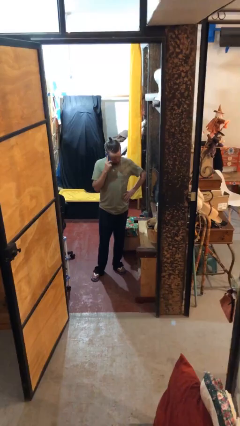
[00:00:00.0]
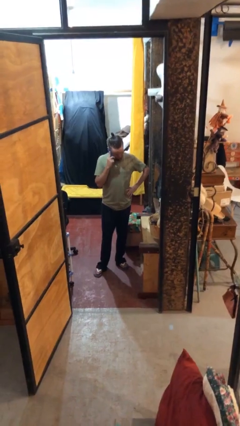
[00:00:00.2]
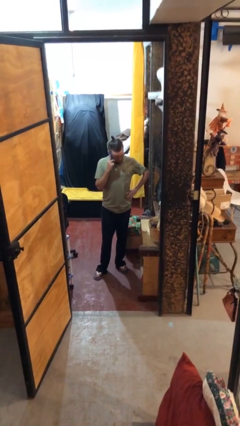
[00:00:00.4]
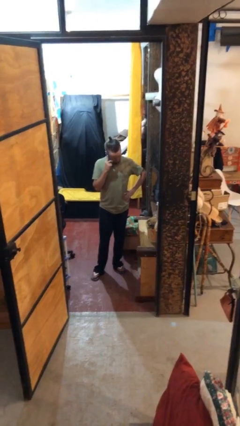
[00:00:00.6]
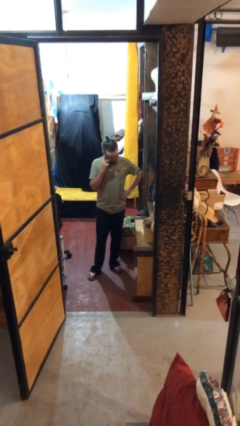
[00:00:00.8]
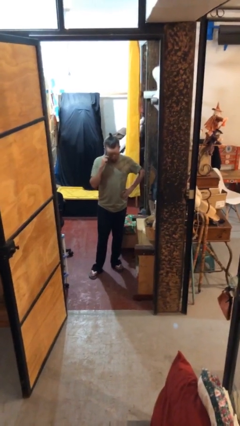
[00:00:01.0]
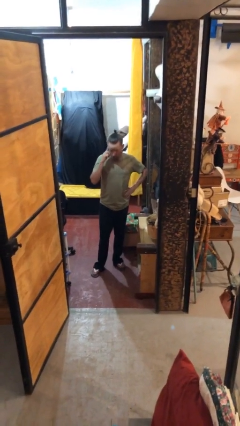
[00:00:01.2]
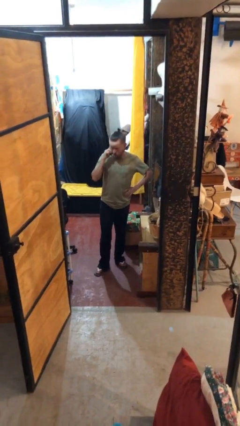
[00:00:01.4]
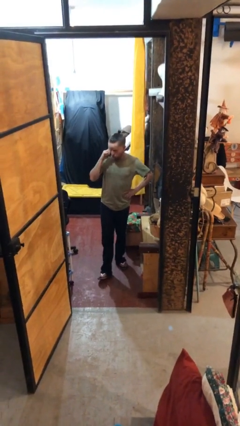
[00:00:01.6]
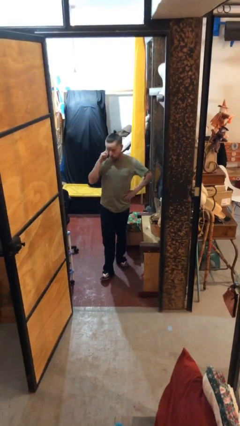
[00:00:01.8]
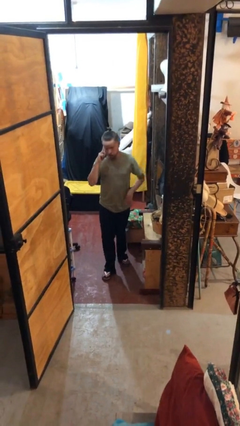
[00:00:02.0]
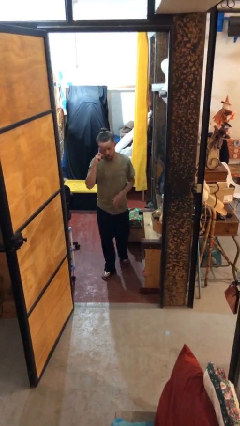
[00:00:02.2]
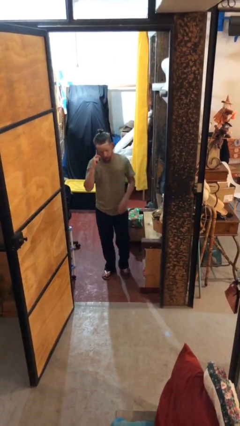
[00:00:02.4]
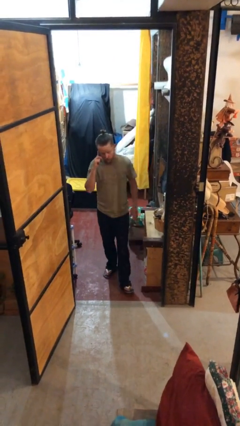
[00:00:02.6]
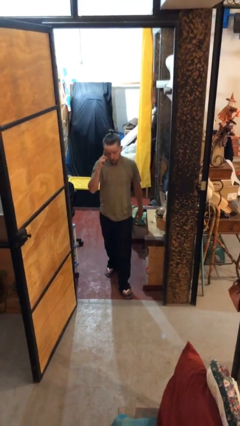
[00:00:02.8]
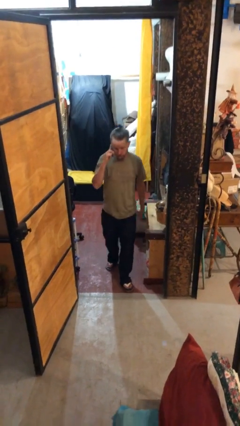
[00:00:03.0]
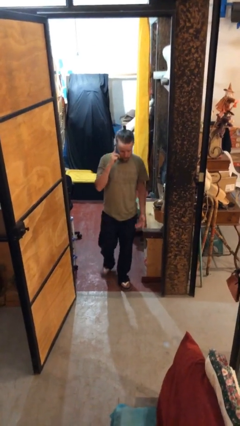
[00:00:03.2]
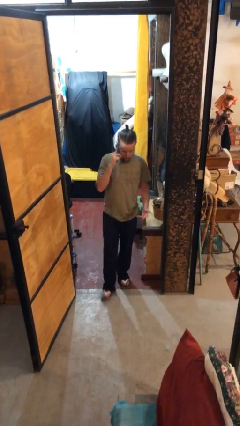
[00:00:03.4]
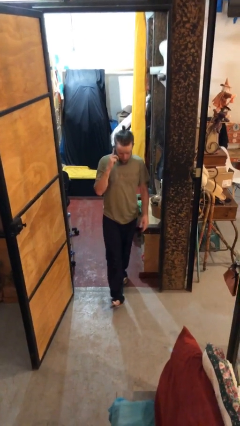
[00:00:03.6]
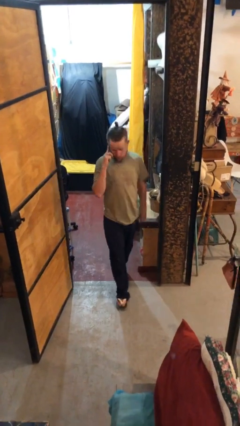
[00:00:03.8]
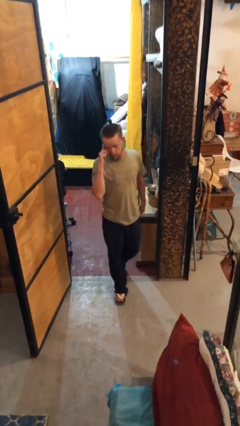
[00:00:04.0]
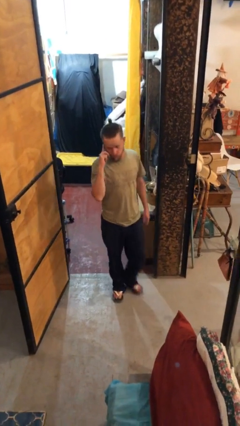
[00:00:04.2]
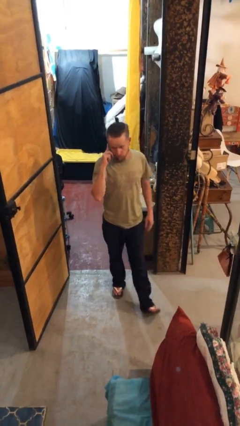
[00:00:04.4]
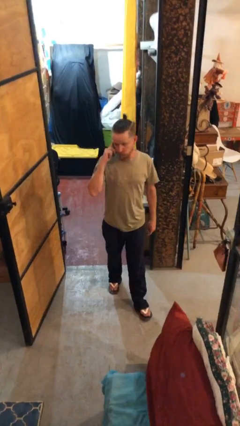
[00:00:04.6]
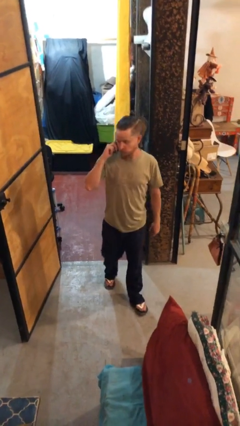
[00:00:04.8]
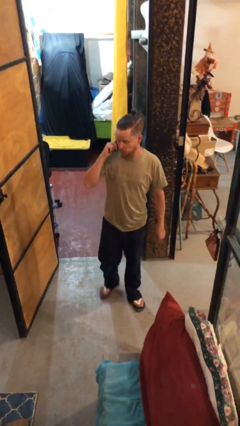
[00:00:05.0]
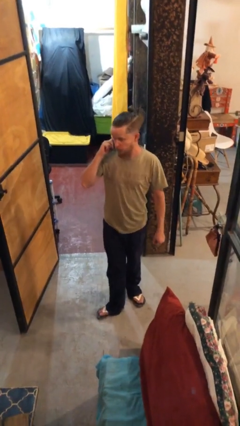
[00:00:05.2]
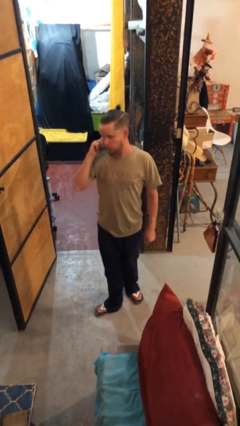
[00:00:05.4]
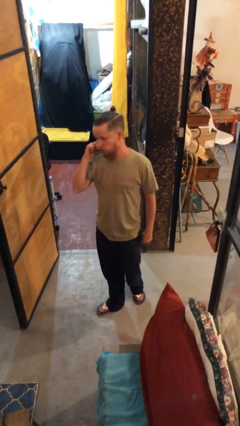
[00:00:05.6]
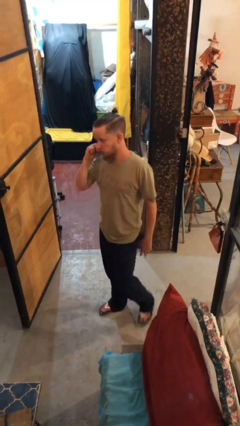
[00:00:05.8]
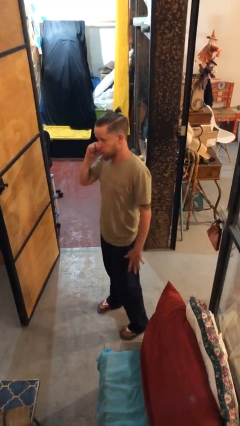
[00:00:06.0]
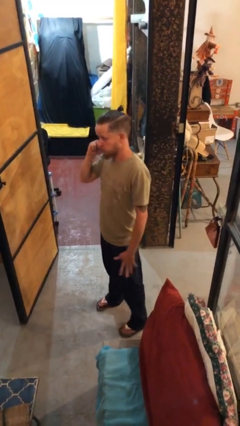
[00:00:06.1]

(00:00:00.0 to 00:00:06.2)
person enters scene through structure

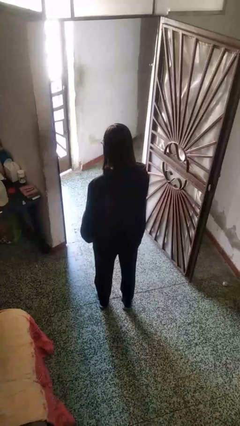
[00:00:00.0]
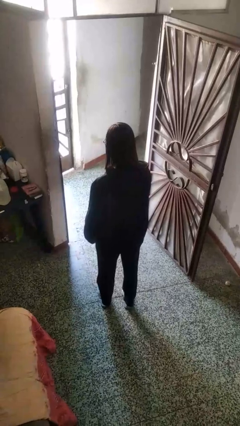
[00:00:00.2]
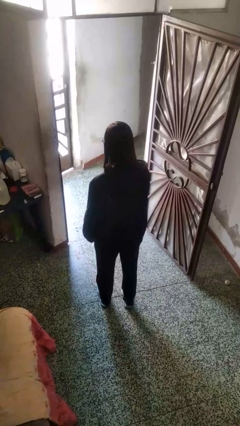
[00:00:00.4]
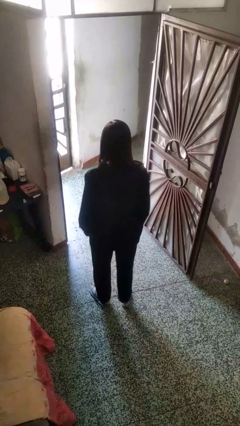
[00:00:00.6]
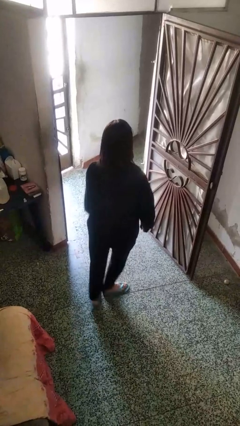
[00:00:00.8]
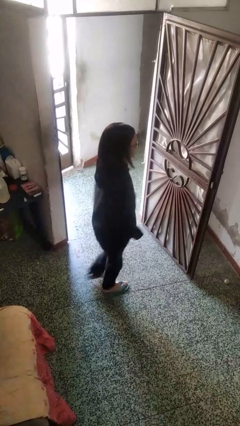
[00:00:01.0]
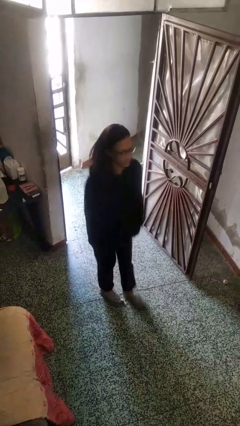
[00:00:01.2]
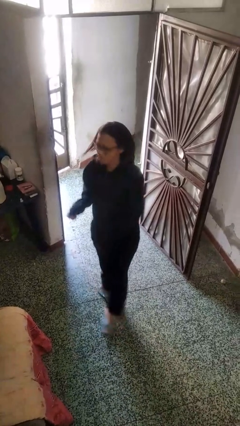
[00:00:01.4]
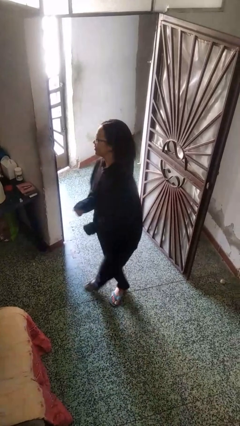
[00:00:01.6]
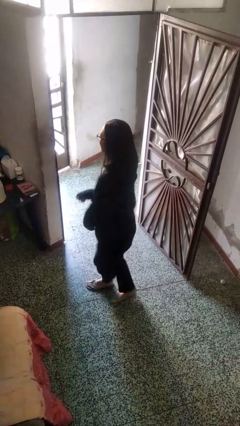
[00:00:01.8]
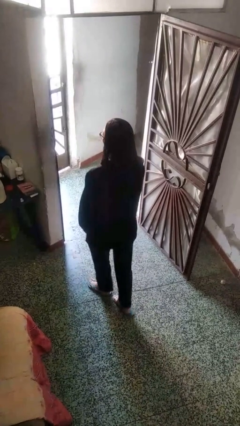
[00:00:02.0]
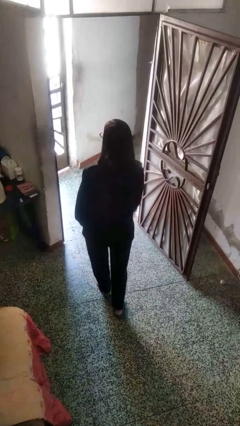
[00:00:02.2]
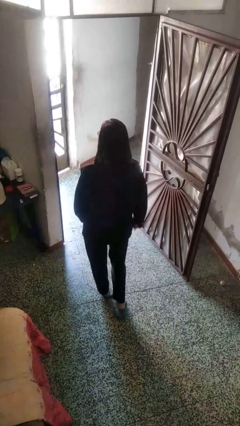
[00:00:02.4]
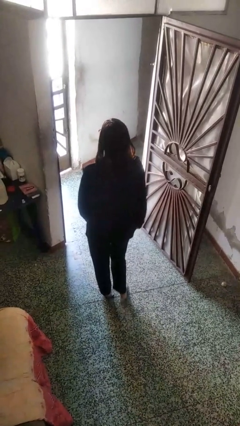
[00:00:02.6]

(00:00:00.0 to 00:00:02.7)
person twirls

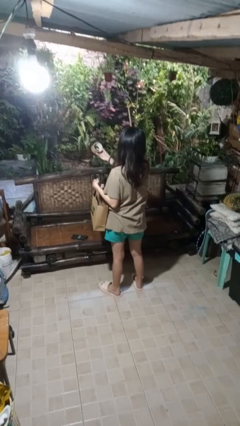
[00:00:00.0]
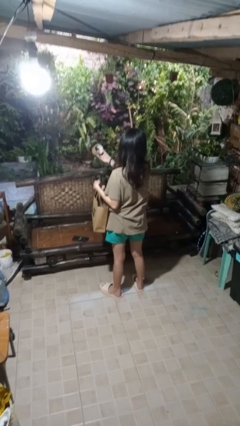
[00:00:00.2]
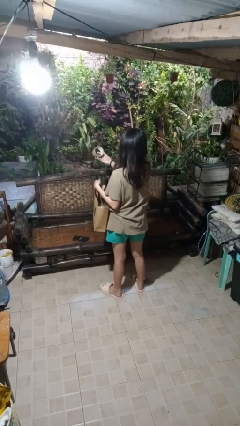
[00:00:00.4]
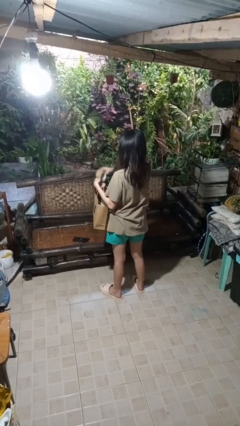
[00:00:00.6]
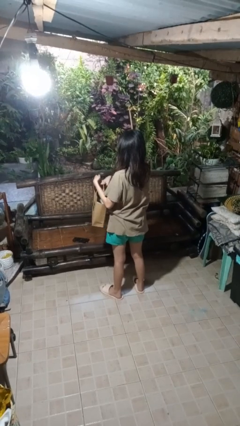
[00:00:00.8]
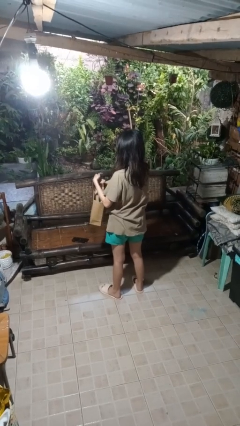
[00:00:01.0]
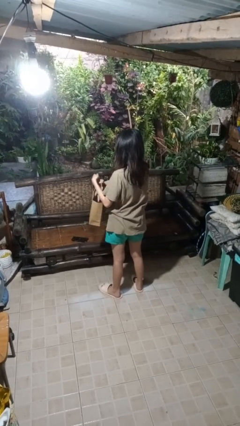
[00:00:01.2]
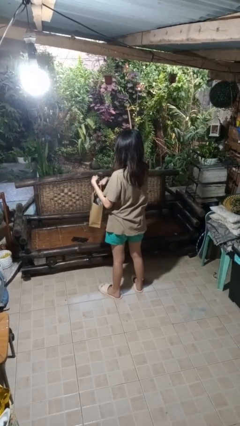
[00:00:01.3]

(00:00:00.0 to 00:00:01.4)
person puts object into bag

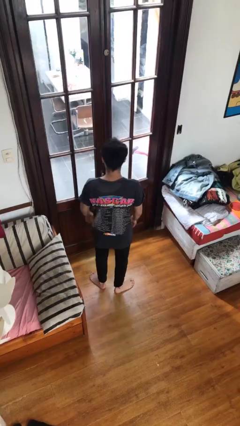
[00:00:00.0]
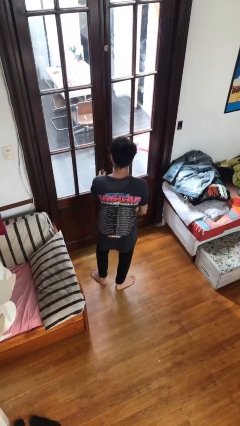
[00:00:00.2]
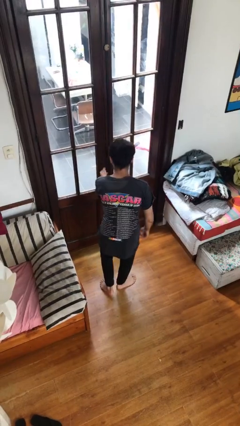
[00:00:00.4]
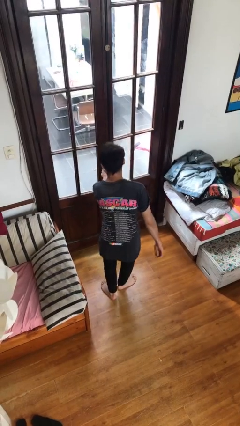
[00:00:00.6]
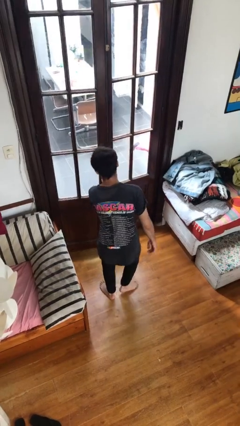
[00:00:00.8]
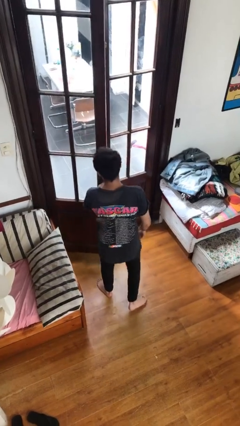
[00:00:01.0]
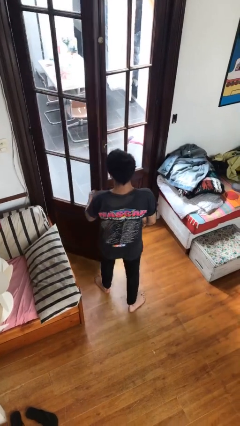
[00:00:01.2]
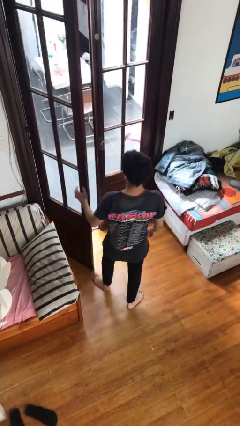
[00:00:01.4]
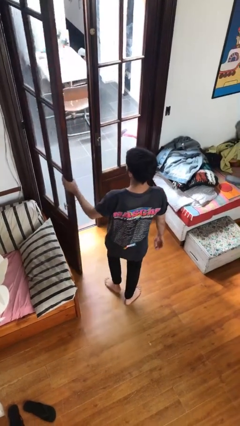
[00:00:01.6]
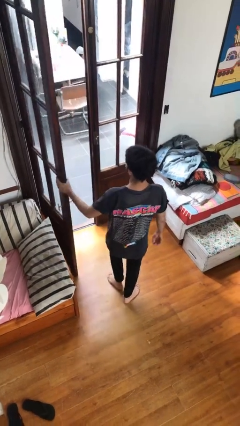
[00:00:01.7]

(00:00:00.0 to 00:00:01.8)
person opens facility door

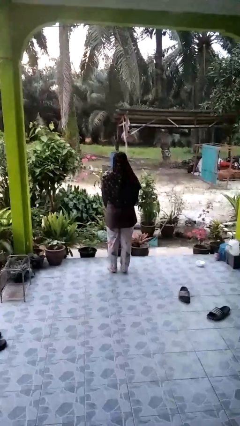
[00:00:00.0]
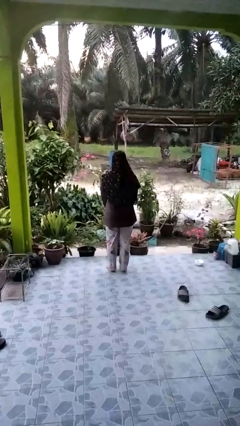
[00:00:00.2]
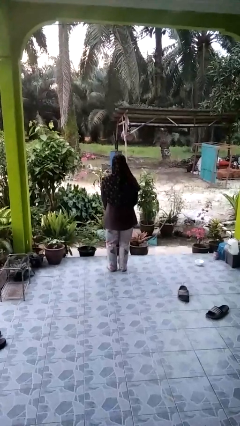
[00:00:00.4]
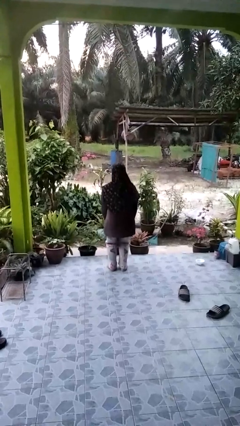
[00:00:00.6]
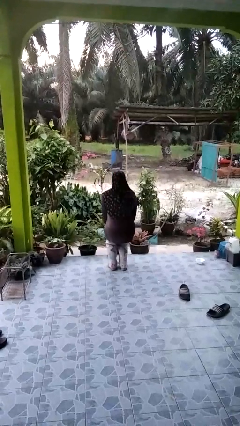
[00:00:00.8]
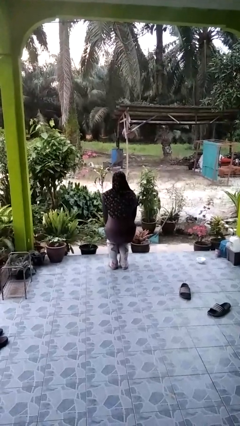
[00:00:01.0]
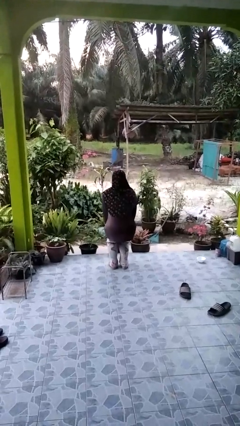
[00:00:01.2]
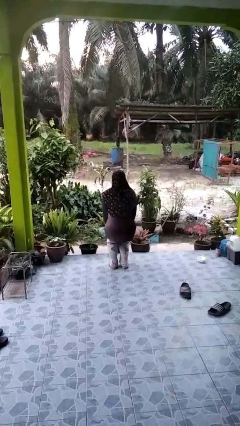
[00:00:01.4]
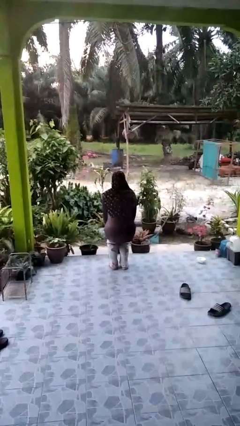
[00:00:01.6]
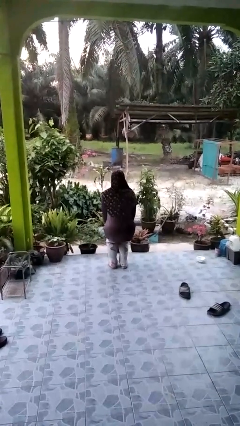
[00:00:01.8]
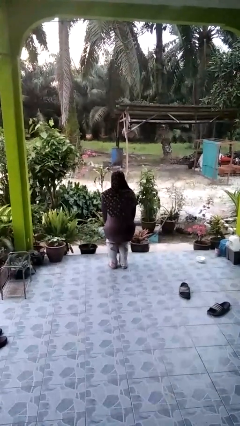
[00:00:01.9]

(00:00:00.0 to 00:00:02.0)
person squats

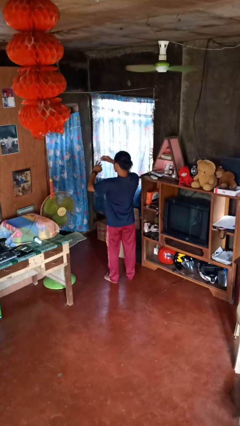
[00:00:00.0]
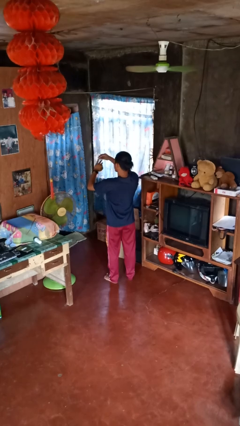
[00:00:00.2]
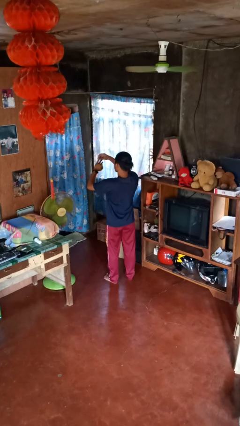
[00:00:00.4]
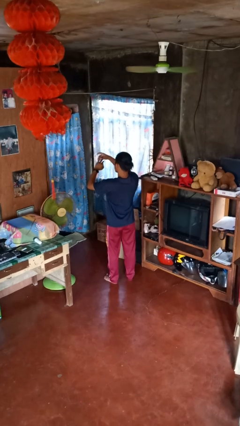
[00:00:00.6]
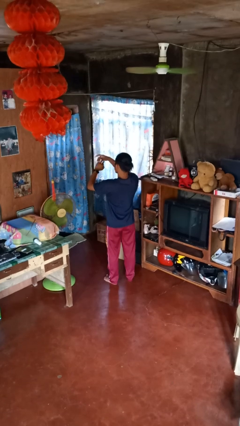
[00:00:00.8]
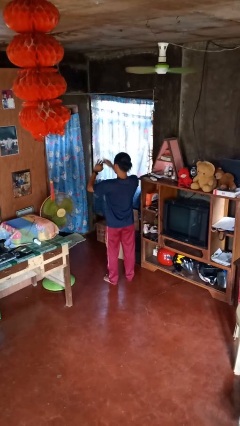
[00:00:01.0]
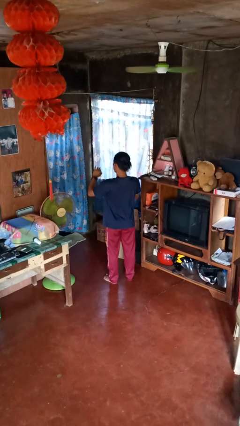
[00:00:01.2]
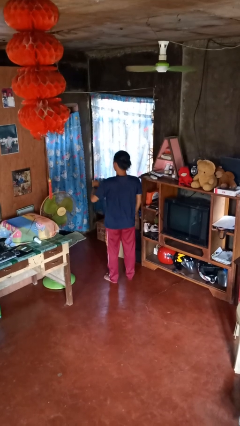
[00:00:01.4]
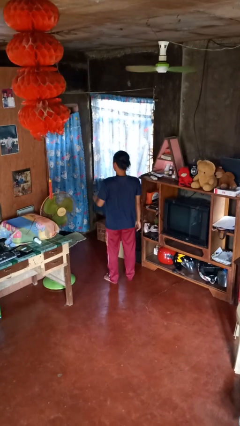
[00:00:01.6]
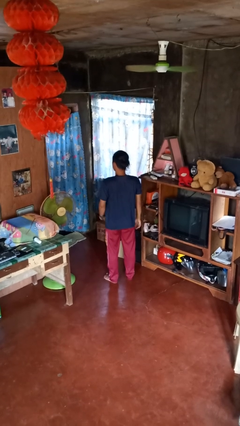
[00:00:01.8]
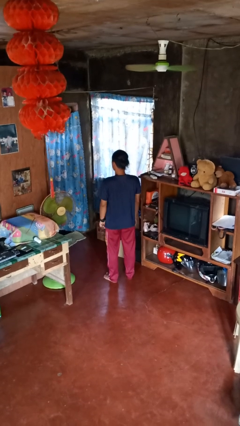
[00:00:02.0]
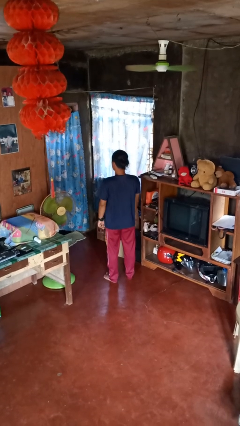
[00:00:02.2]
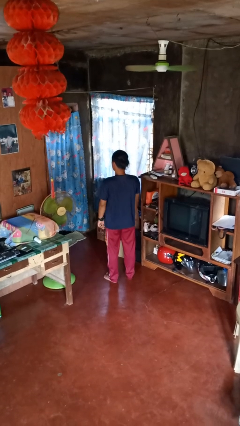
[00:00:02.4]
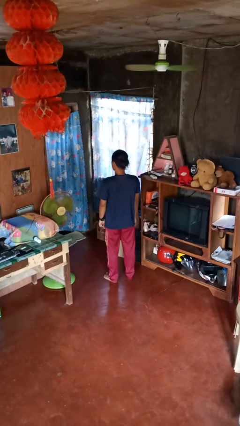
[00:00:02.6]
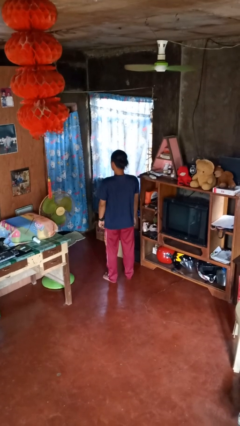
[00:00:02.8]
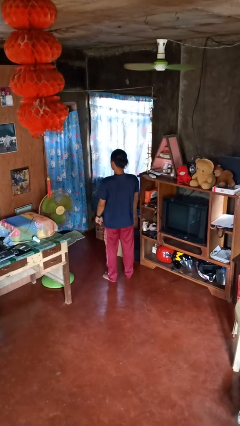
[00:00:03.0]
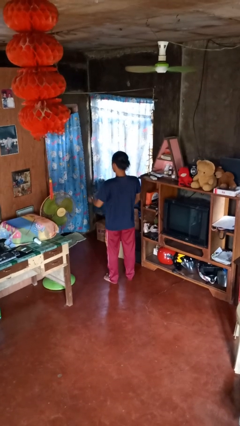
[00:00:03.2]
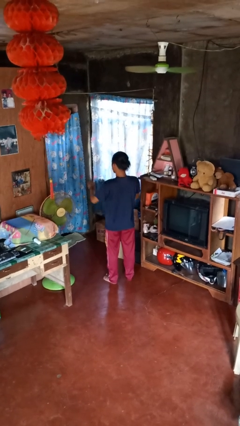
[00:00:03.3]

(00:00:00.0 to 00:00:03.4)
person puts on ring
